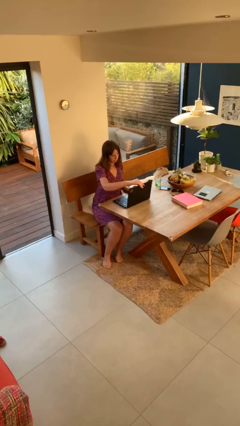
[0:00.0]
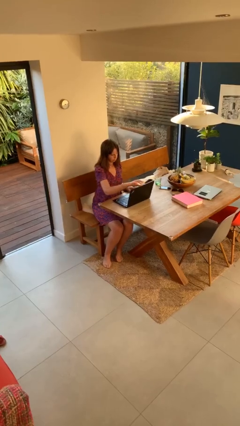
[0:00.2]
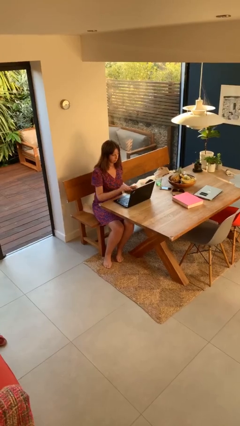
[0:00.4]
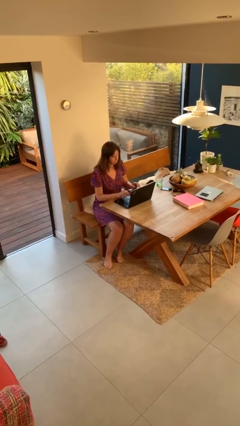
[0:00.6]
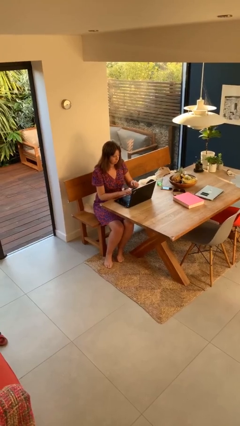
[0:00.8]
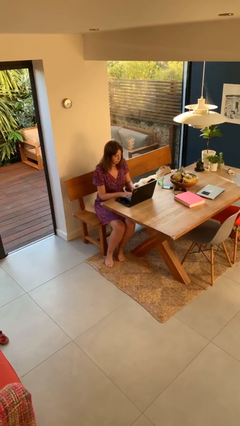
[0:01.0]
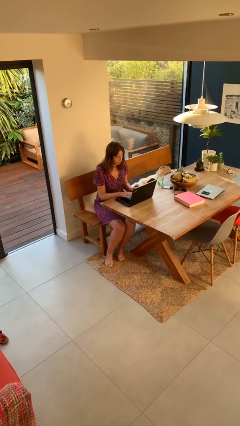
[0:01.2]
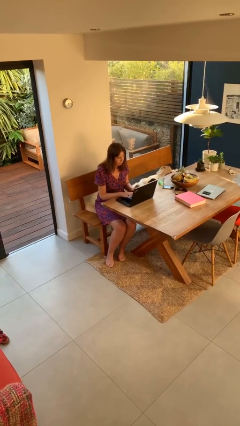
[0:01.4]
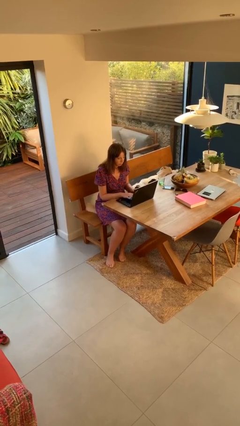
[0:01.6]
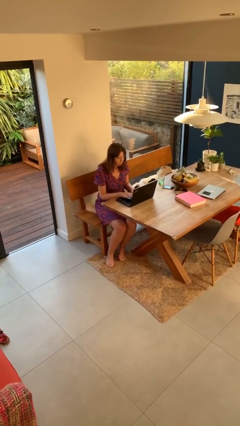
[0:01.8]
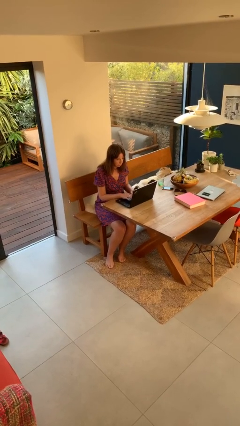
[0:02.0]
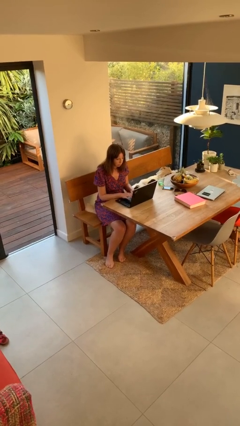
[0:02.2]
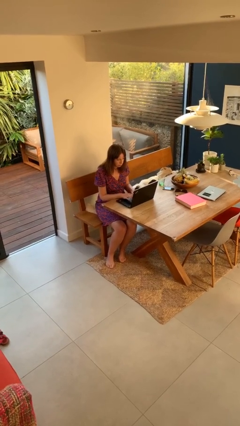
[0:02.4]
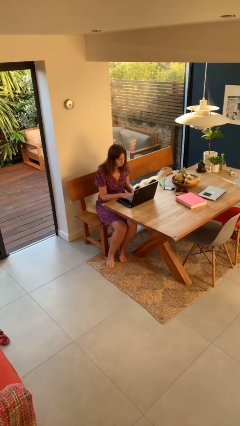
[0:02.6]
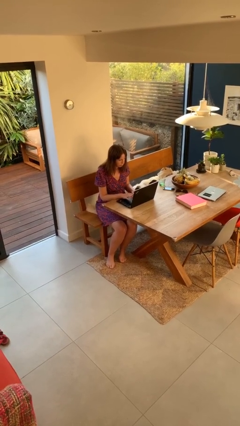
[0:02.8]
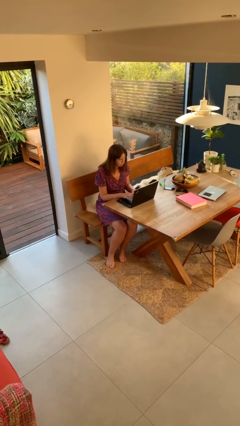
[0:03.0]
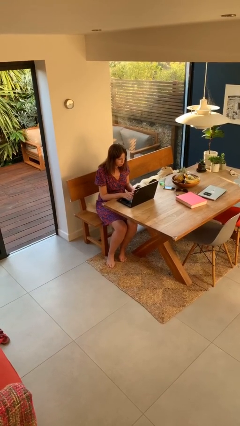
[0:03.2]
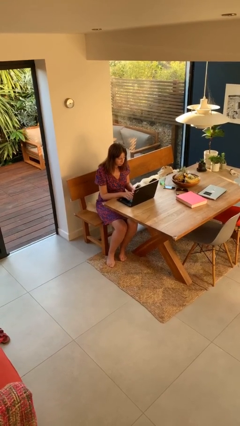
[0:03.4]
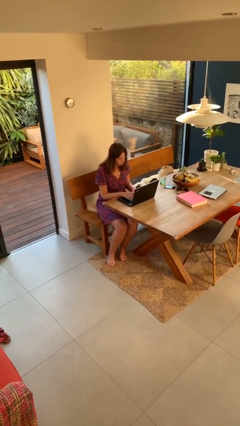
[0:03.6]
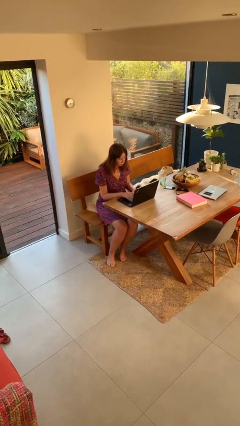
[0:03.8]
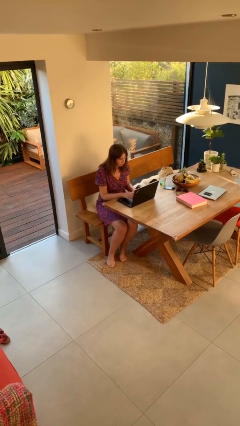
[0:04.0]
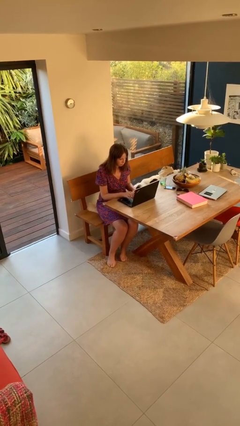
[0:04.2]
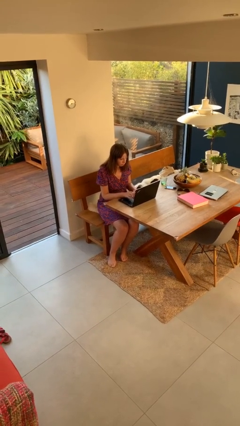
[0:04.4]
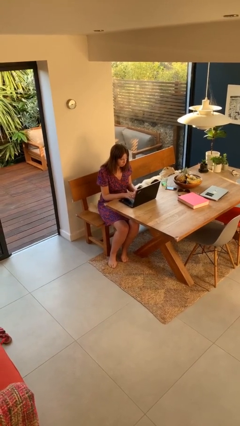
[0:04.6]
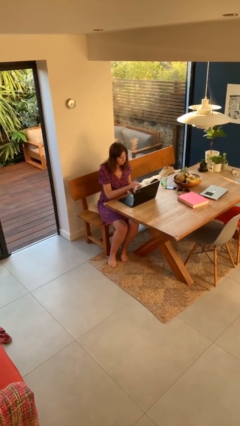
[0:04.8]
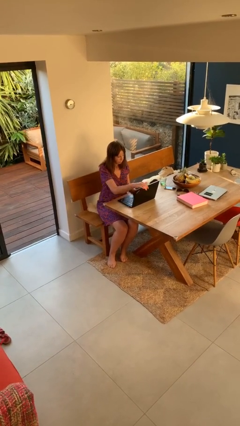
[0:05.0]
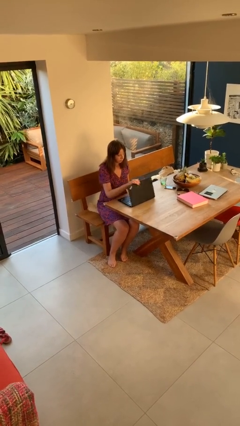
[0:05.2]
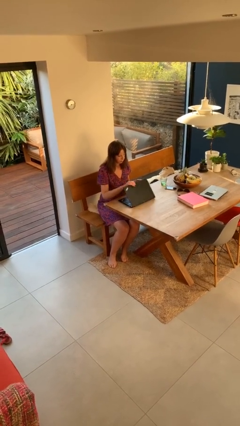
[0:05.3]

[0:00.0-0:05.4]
person interacts with laptop

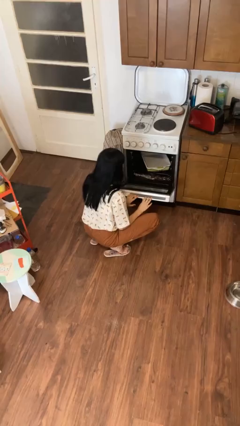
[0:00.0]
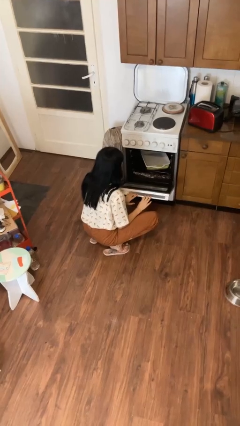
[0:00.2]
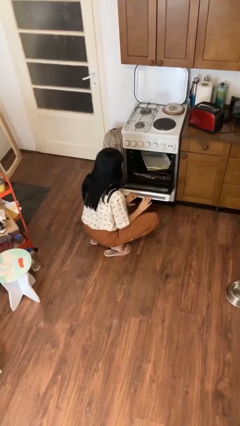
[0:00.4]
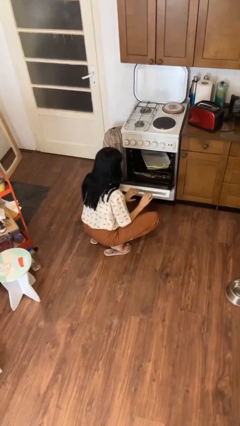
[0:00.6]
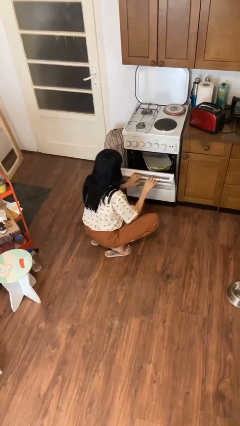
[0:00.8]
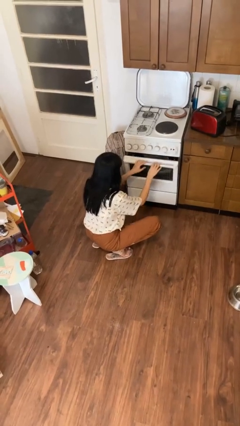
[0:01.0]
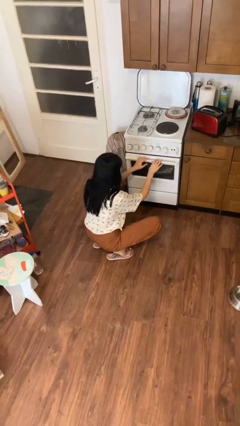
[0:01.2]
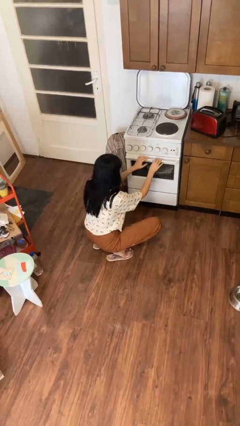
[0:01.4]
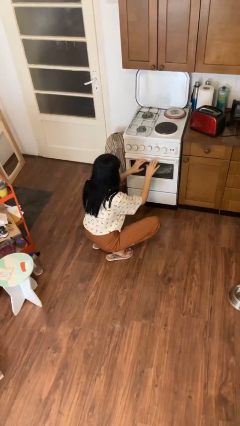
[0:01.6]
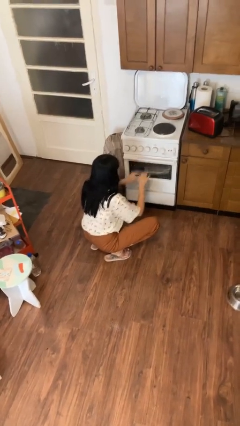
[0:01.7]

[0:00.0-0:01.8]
person closes oven door

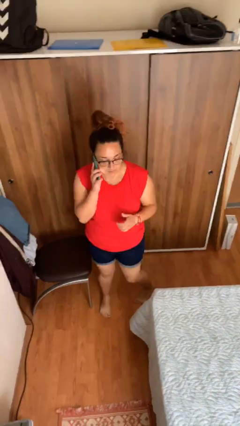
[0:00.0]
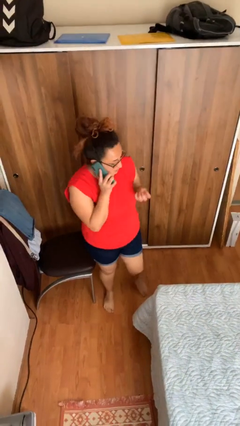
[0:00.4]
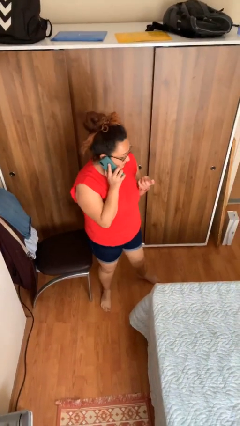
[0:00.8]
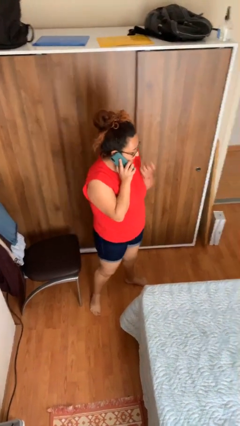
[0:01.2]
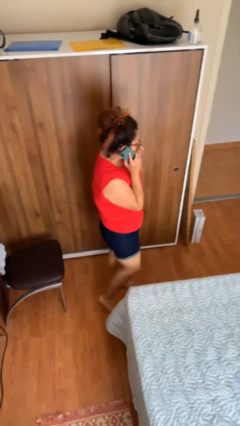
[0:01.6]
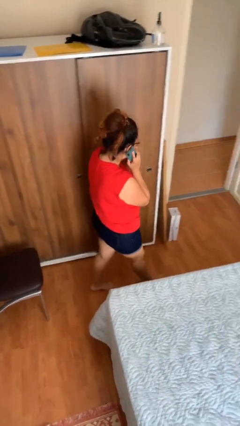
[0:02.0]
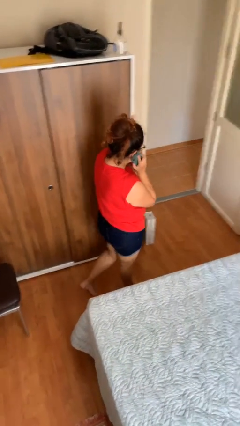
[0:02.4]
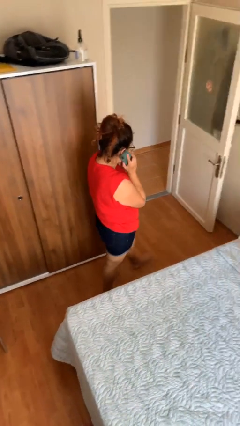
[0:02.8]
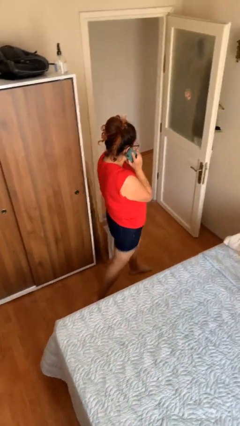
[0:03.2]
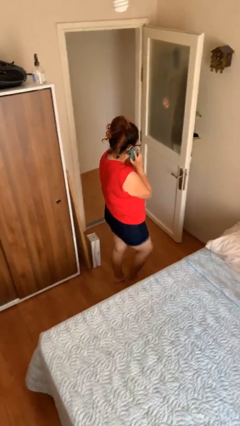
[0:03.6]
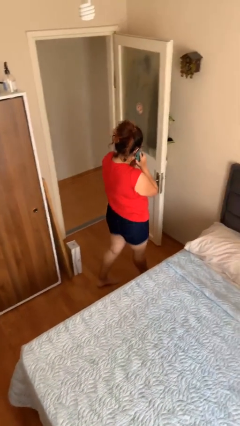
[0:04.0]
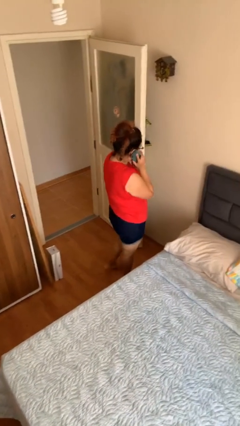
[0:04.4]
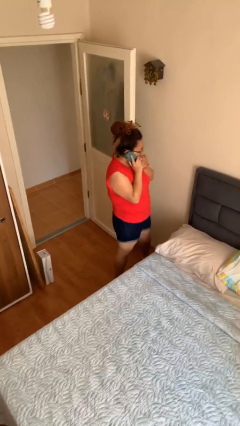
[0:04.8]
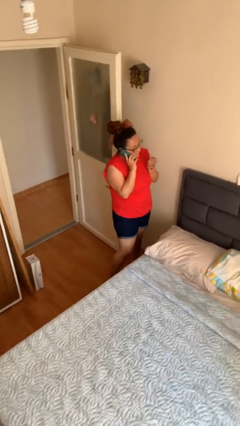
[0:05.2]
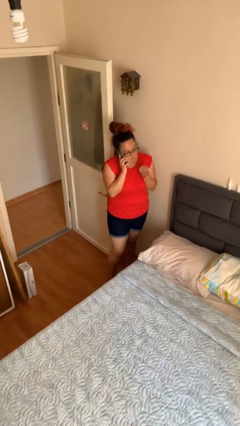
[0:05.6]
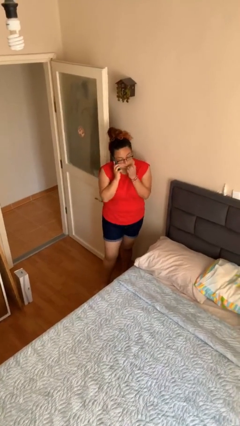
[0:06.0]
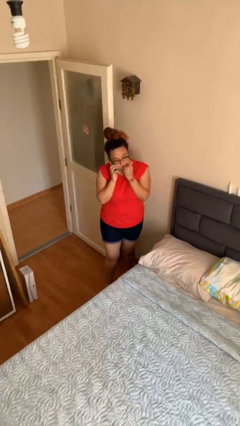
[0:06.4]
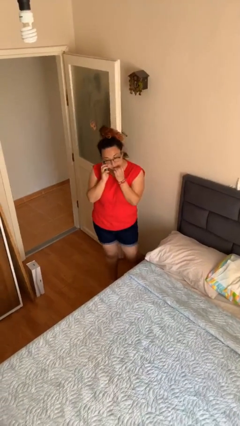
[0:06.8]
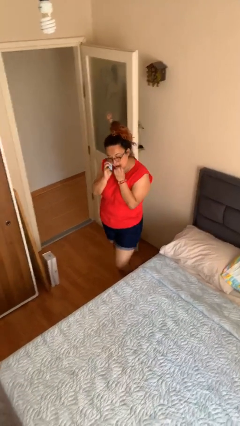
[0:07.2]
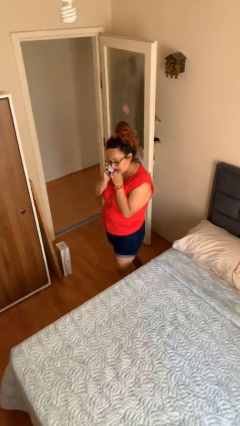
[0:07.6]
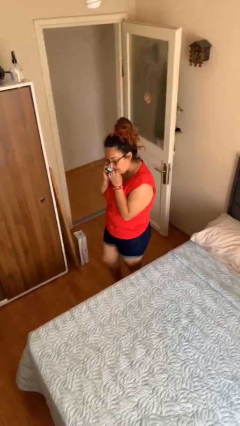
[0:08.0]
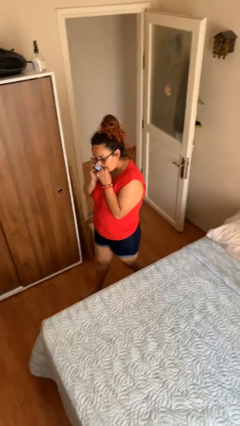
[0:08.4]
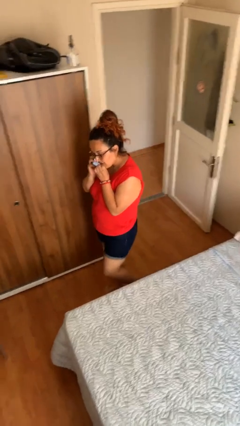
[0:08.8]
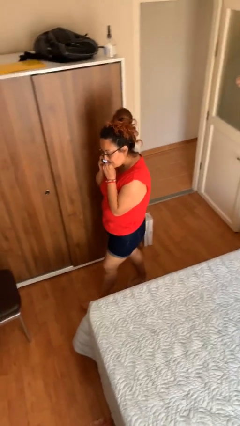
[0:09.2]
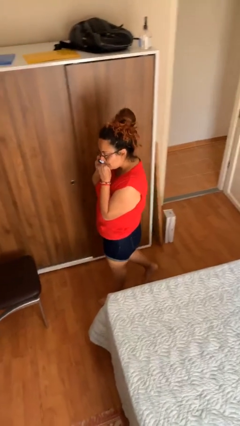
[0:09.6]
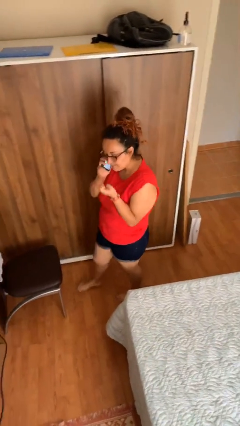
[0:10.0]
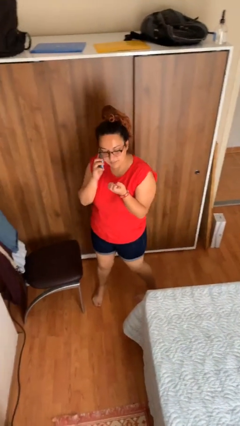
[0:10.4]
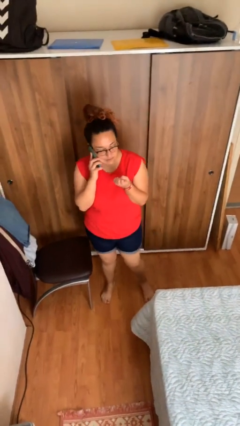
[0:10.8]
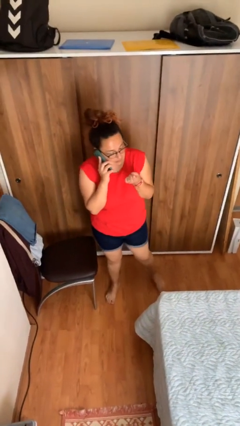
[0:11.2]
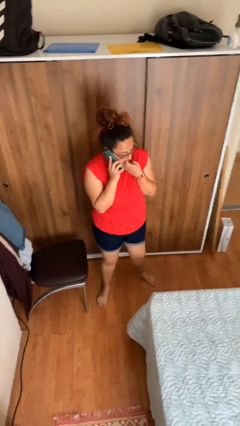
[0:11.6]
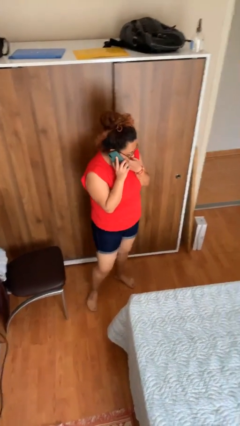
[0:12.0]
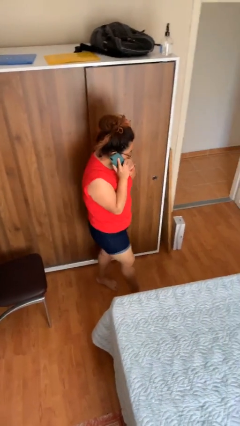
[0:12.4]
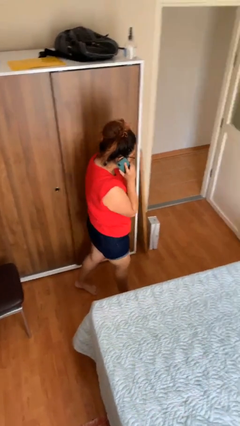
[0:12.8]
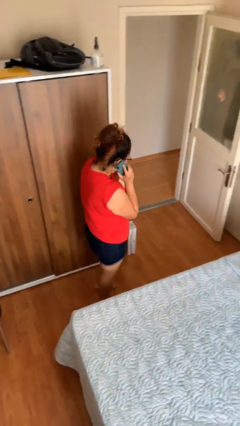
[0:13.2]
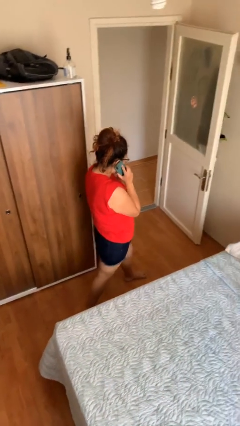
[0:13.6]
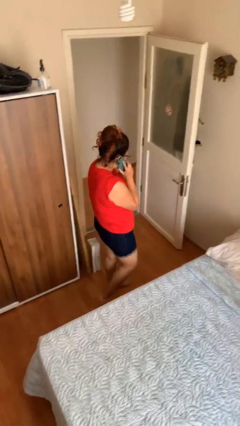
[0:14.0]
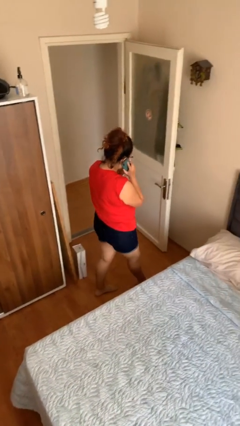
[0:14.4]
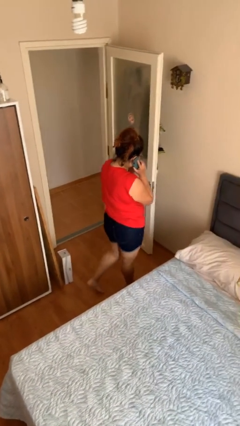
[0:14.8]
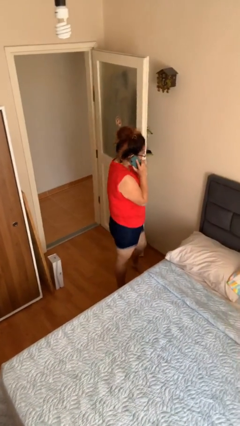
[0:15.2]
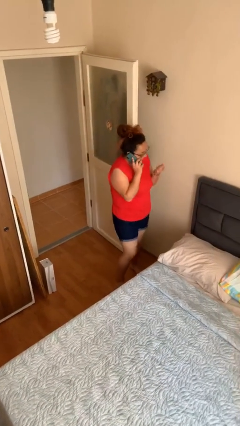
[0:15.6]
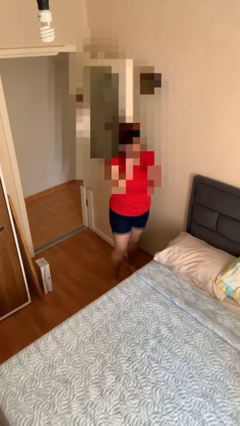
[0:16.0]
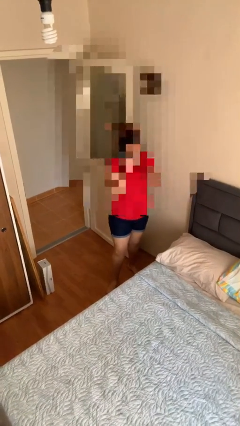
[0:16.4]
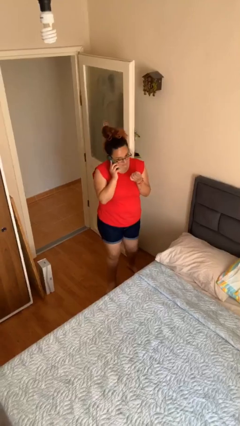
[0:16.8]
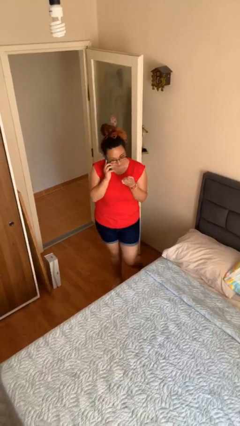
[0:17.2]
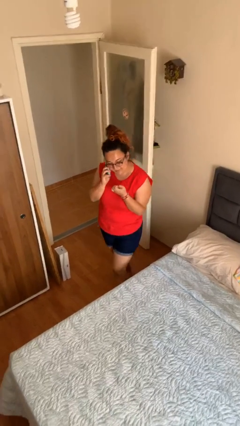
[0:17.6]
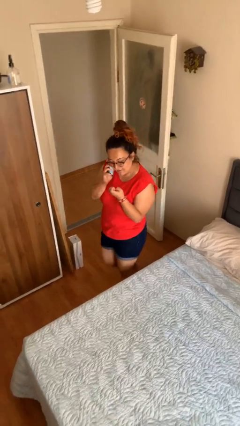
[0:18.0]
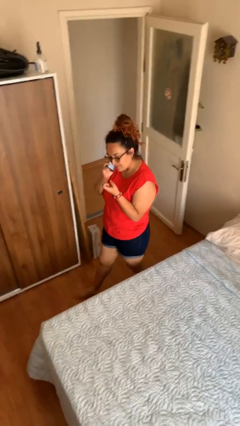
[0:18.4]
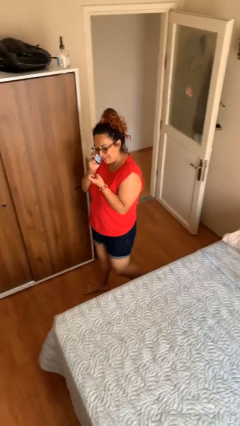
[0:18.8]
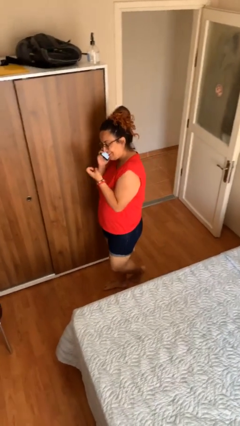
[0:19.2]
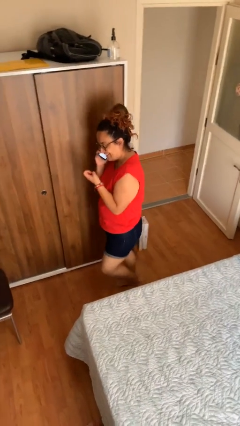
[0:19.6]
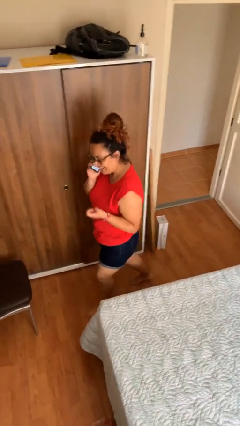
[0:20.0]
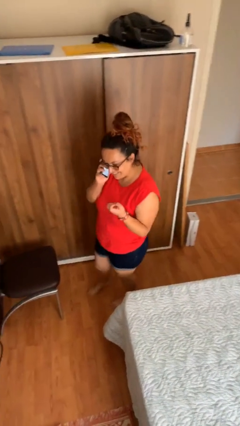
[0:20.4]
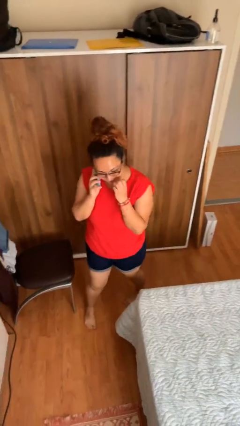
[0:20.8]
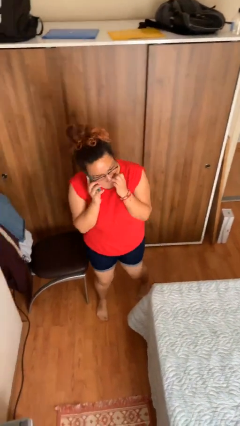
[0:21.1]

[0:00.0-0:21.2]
person talks on phone
